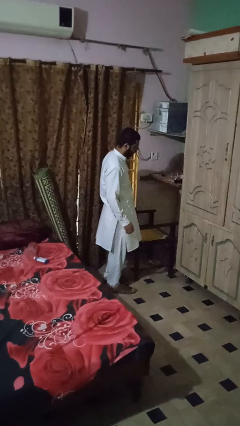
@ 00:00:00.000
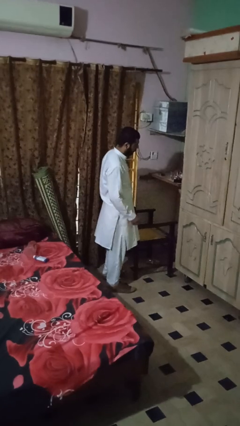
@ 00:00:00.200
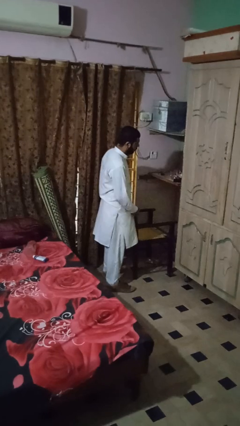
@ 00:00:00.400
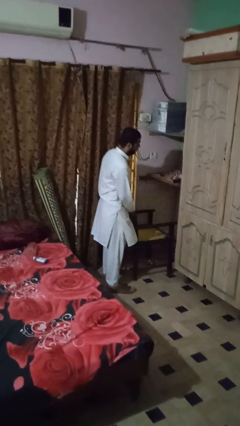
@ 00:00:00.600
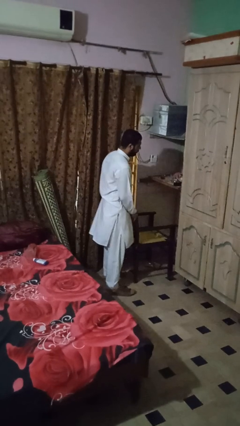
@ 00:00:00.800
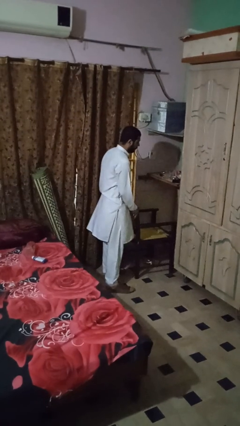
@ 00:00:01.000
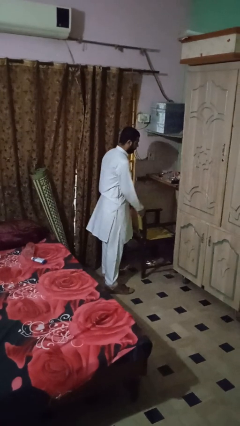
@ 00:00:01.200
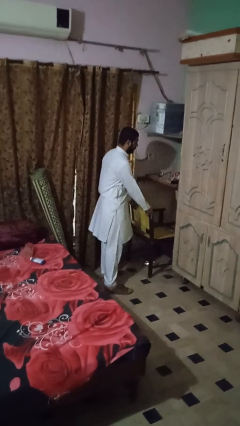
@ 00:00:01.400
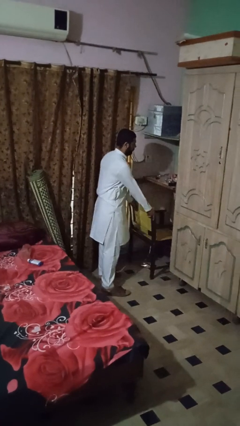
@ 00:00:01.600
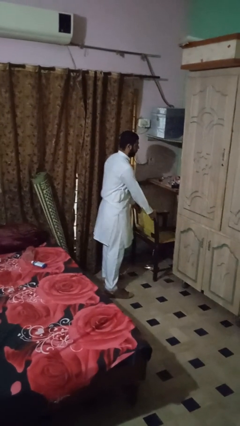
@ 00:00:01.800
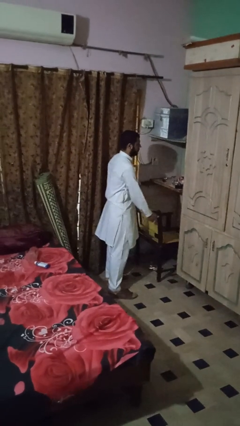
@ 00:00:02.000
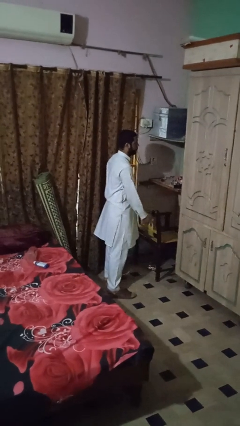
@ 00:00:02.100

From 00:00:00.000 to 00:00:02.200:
person pushes in chair

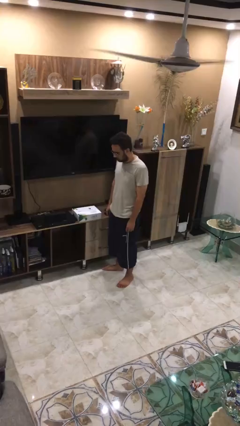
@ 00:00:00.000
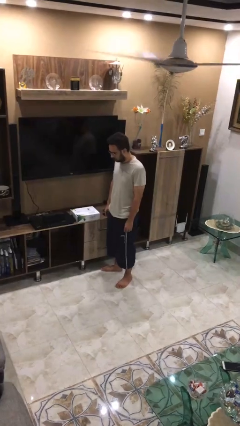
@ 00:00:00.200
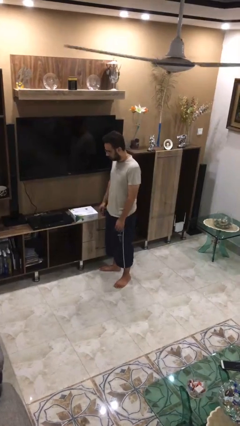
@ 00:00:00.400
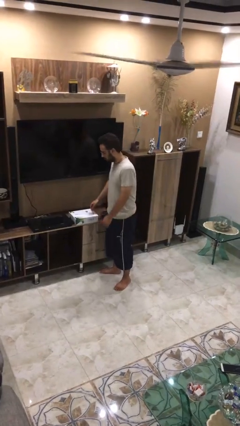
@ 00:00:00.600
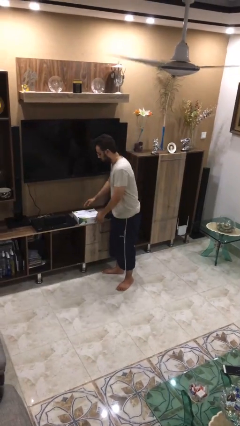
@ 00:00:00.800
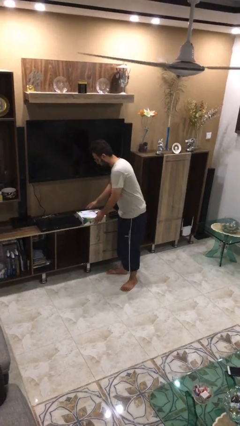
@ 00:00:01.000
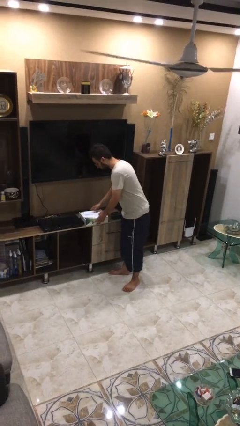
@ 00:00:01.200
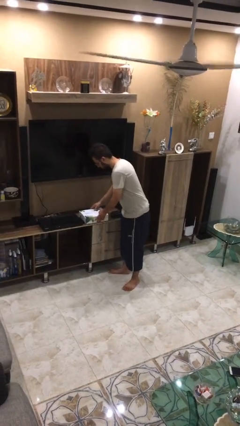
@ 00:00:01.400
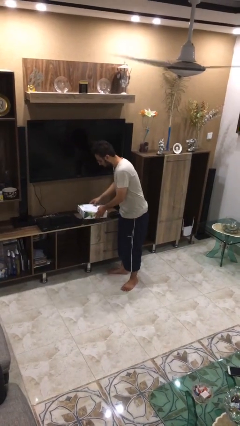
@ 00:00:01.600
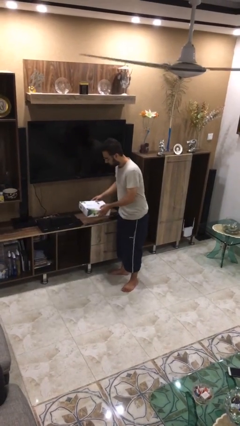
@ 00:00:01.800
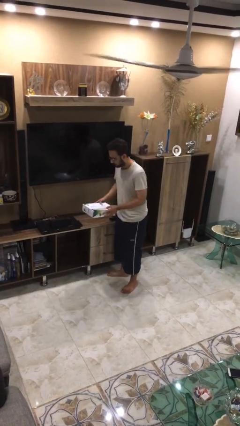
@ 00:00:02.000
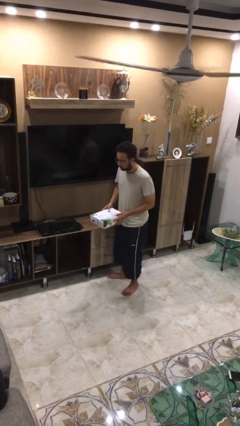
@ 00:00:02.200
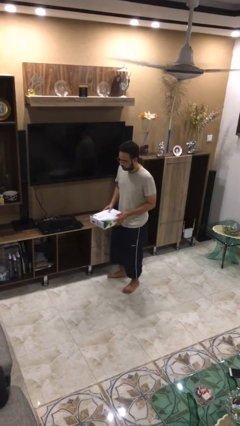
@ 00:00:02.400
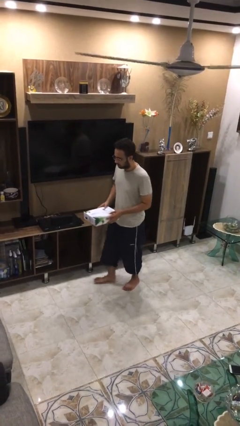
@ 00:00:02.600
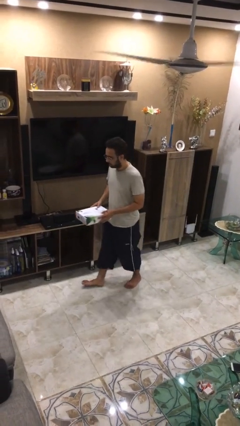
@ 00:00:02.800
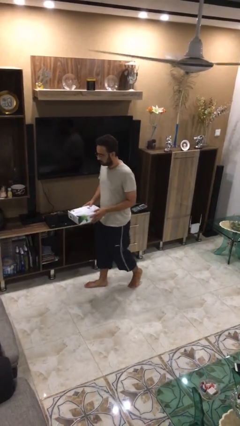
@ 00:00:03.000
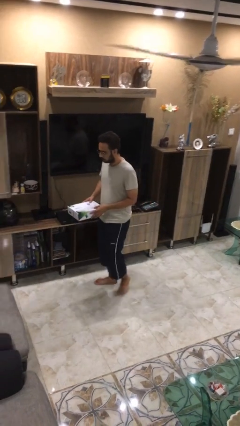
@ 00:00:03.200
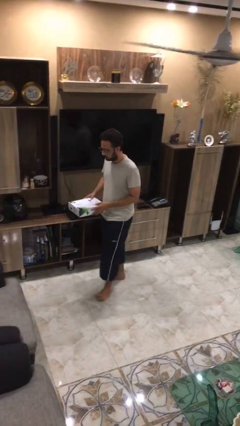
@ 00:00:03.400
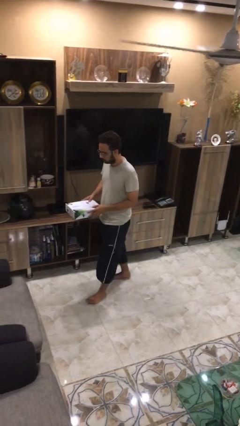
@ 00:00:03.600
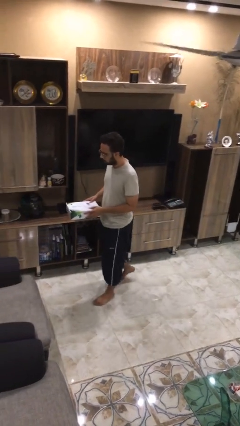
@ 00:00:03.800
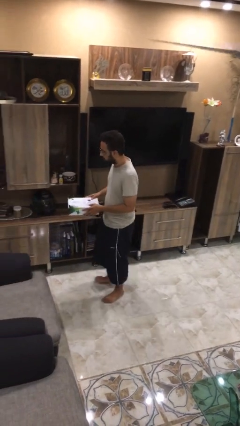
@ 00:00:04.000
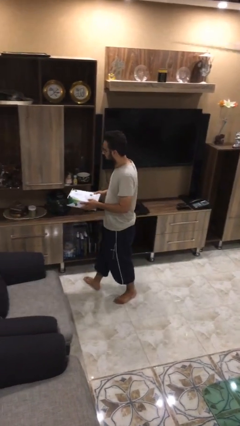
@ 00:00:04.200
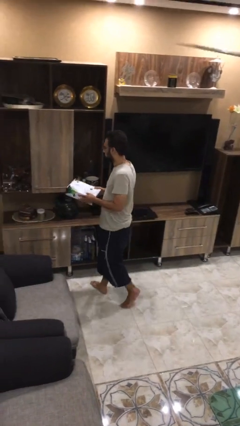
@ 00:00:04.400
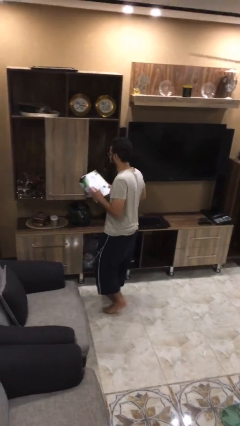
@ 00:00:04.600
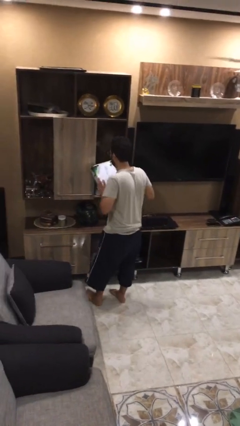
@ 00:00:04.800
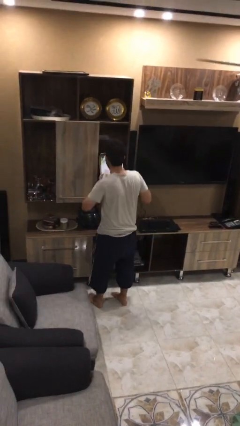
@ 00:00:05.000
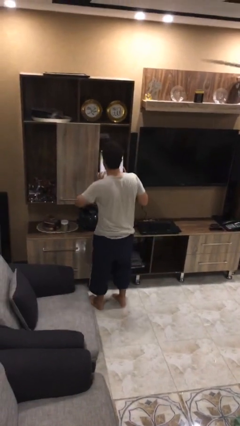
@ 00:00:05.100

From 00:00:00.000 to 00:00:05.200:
person picks up object from table

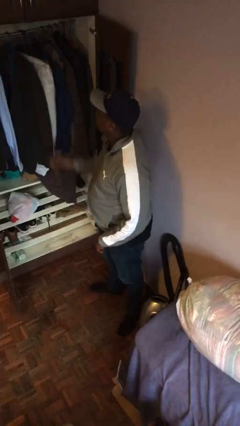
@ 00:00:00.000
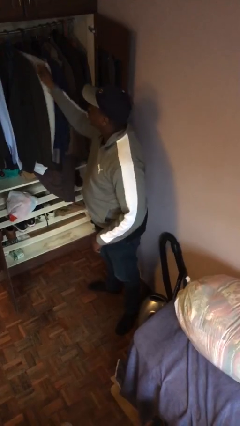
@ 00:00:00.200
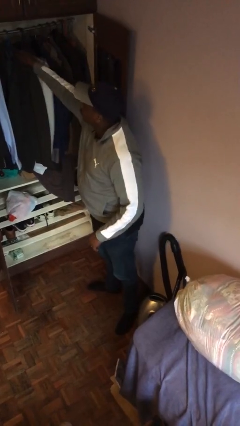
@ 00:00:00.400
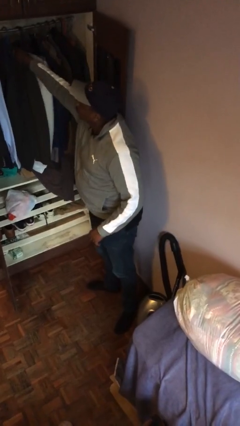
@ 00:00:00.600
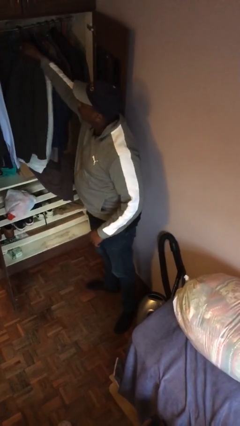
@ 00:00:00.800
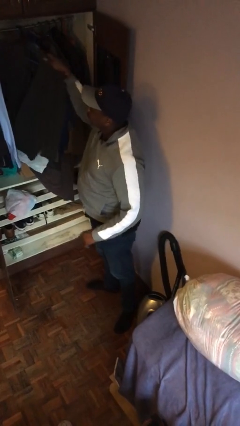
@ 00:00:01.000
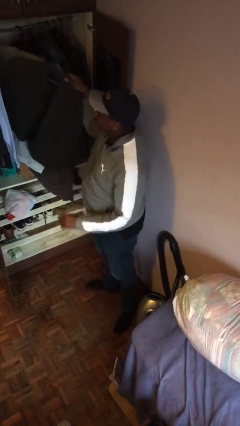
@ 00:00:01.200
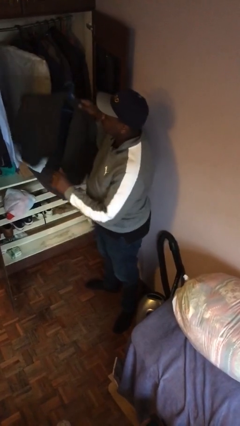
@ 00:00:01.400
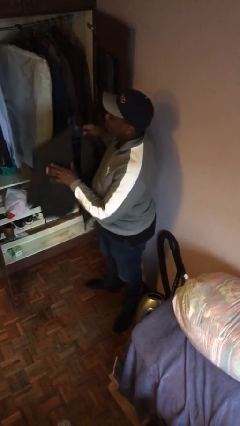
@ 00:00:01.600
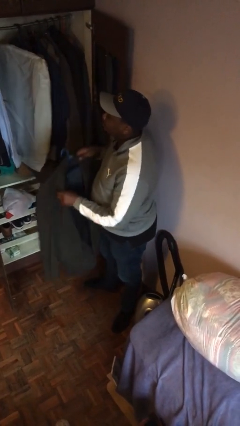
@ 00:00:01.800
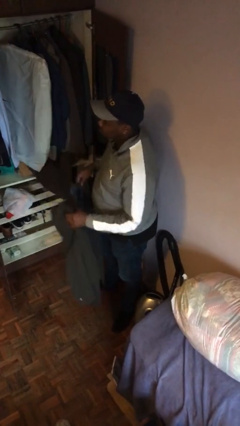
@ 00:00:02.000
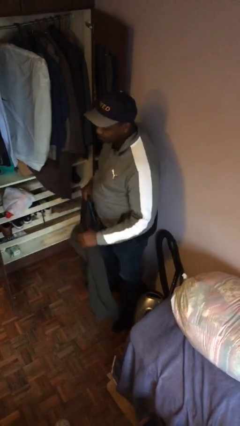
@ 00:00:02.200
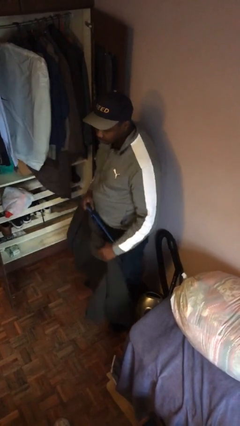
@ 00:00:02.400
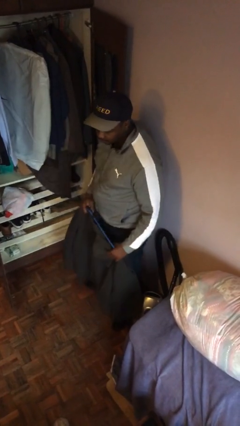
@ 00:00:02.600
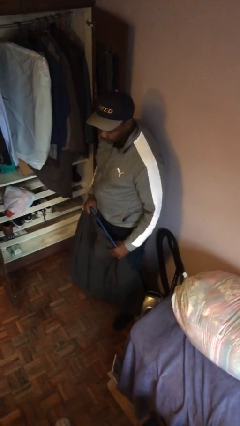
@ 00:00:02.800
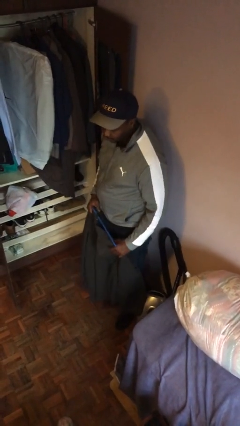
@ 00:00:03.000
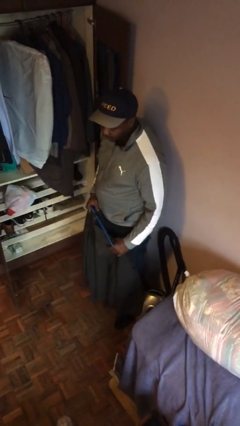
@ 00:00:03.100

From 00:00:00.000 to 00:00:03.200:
person takes clothes from closet

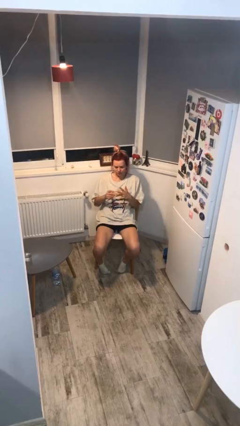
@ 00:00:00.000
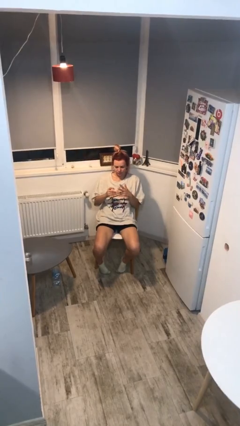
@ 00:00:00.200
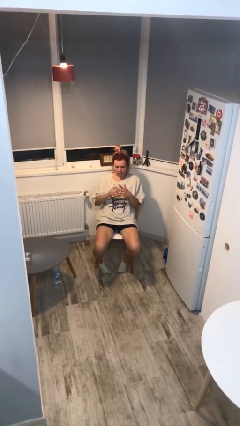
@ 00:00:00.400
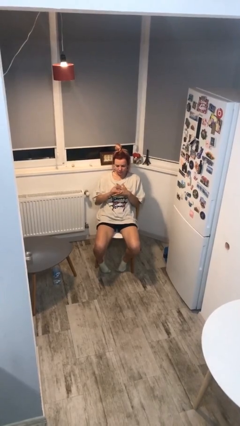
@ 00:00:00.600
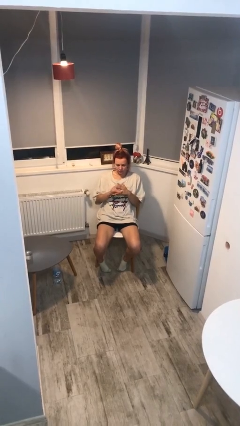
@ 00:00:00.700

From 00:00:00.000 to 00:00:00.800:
person puts on ring

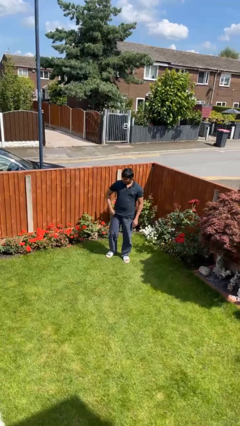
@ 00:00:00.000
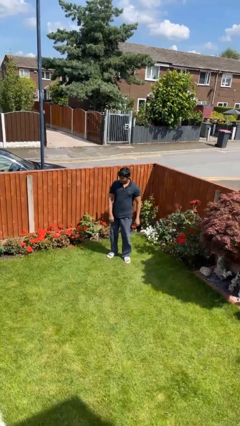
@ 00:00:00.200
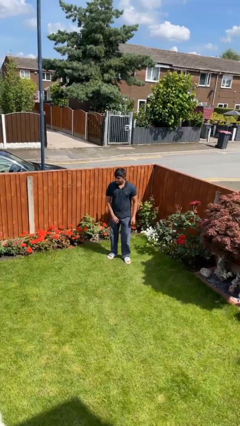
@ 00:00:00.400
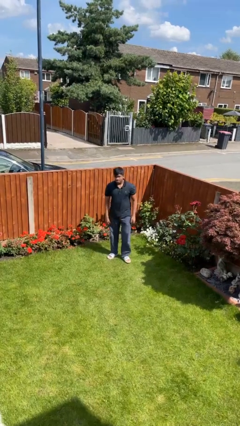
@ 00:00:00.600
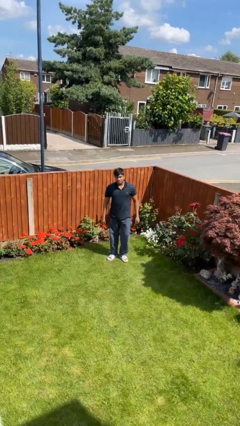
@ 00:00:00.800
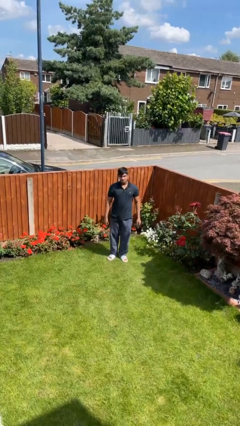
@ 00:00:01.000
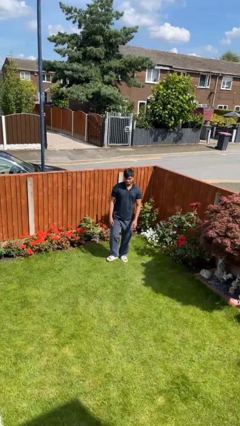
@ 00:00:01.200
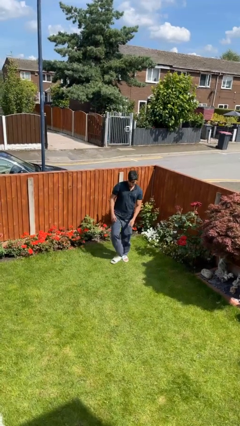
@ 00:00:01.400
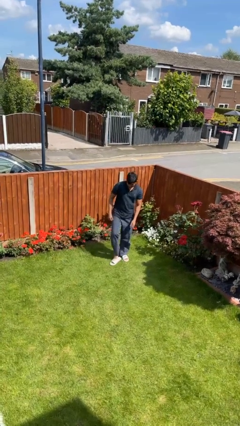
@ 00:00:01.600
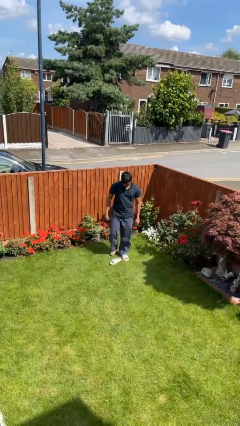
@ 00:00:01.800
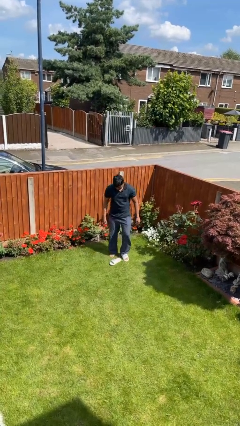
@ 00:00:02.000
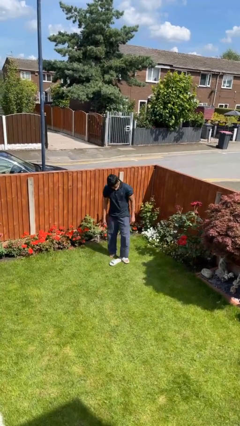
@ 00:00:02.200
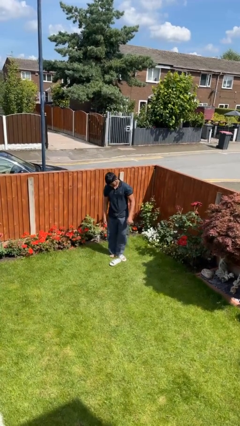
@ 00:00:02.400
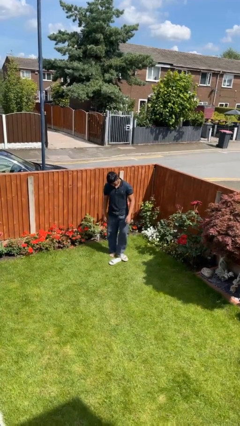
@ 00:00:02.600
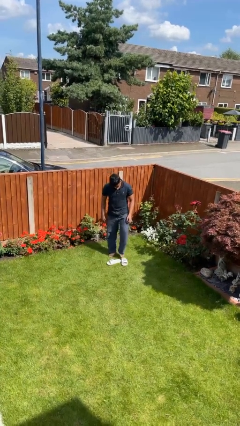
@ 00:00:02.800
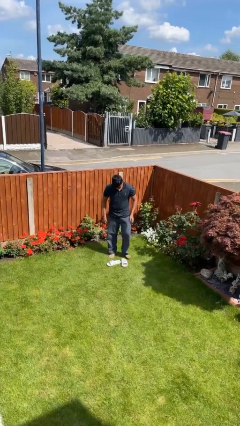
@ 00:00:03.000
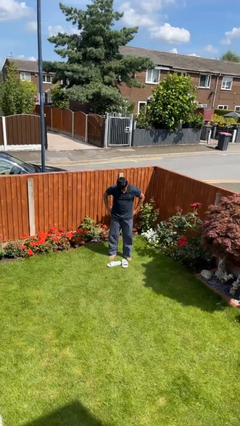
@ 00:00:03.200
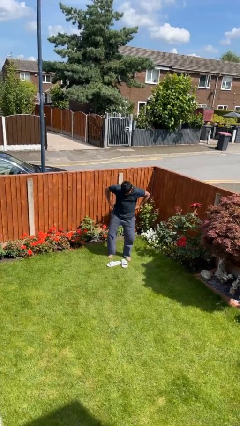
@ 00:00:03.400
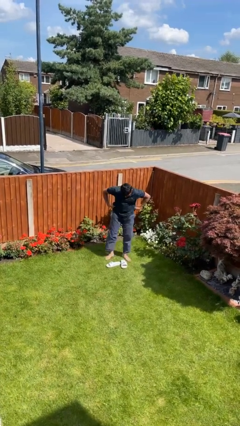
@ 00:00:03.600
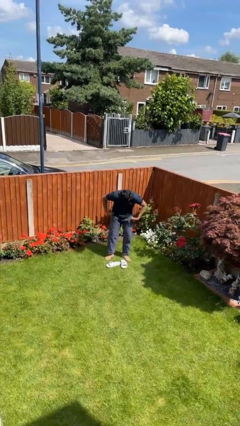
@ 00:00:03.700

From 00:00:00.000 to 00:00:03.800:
person takes off shoes

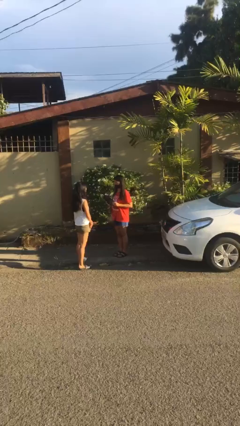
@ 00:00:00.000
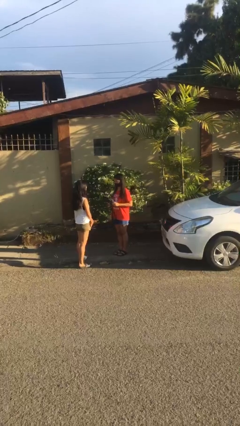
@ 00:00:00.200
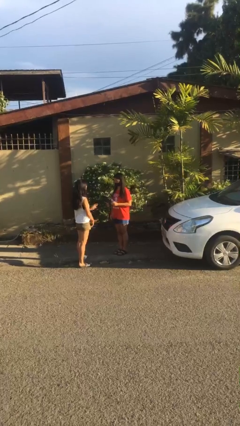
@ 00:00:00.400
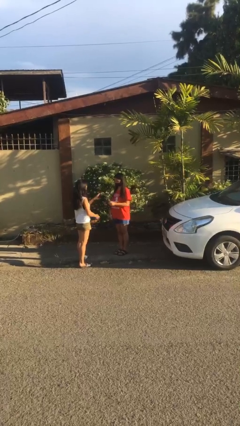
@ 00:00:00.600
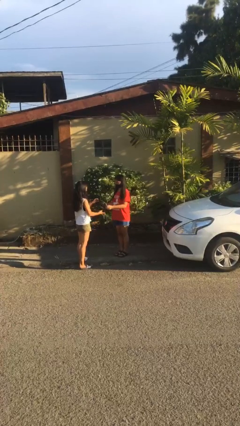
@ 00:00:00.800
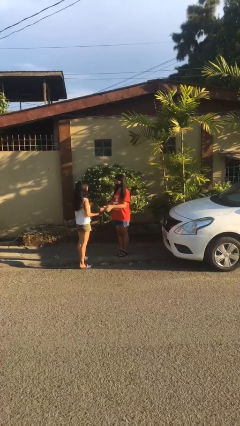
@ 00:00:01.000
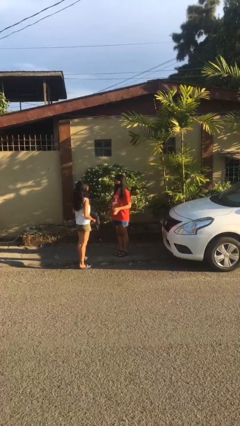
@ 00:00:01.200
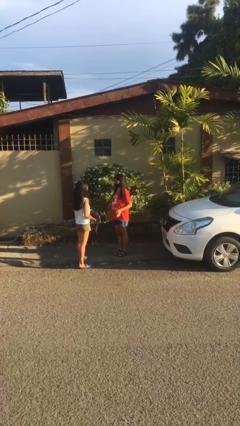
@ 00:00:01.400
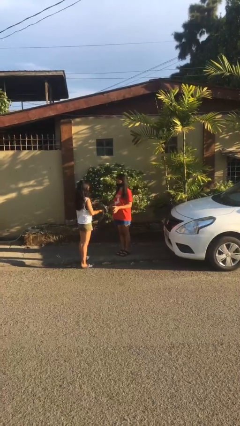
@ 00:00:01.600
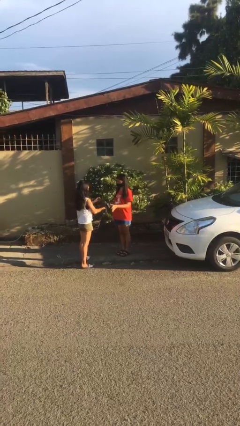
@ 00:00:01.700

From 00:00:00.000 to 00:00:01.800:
person transfers object to person
